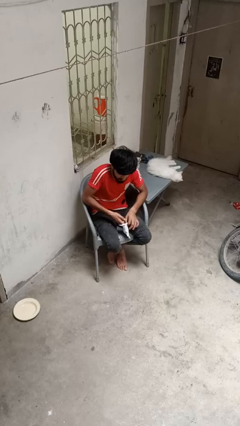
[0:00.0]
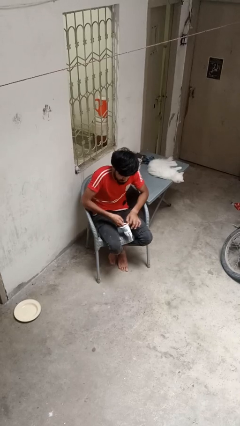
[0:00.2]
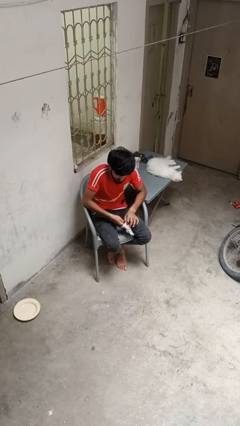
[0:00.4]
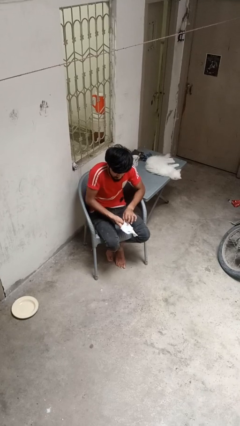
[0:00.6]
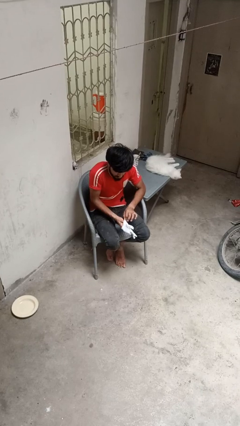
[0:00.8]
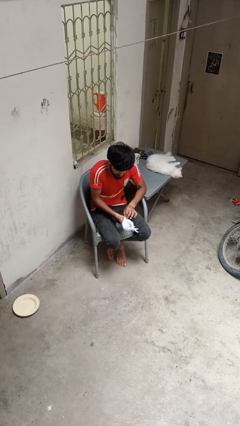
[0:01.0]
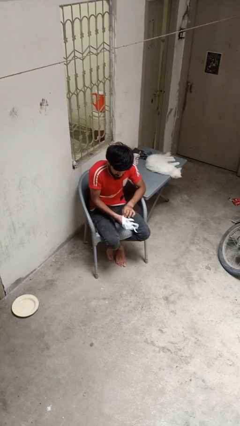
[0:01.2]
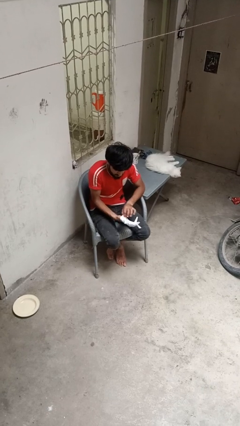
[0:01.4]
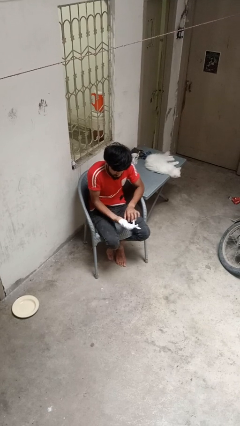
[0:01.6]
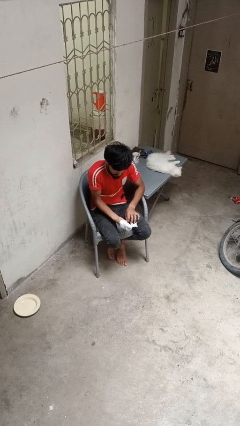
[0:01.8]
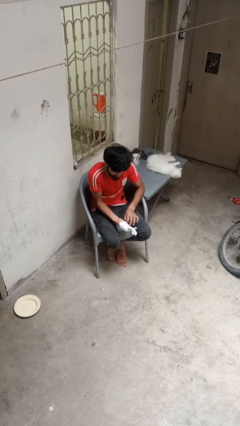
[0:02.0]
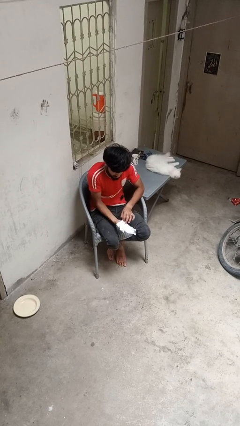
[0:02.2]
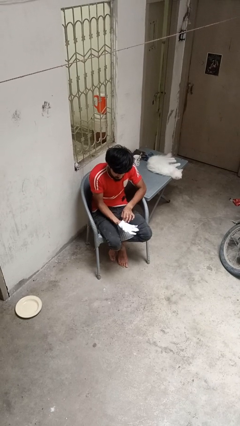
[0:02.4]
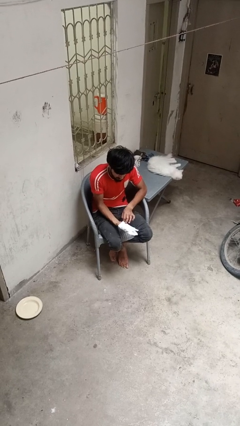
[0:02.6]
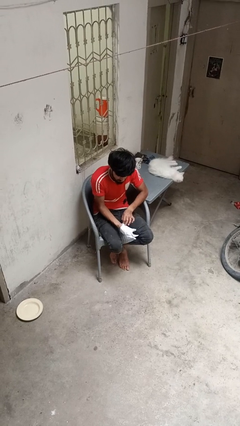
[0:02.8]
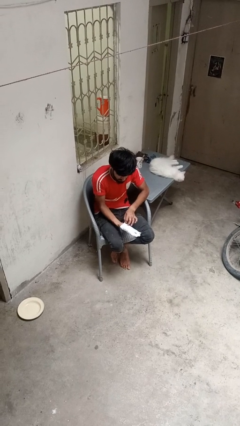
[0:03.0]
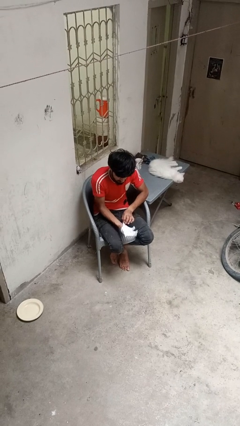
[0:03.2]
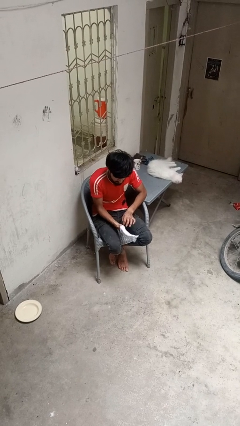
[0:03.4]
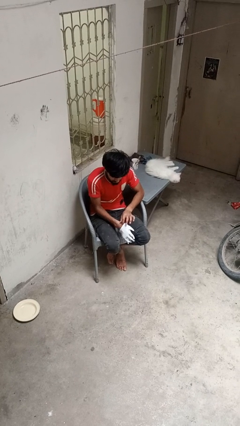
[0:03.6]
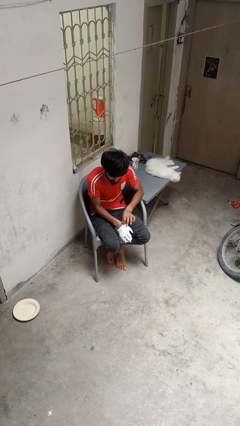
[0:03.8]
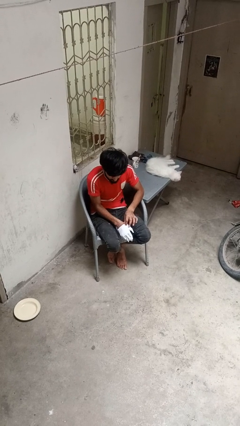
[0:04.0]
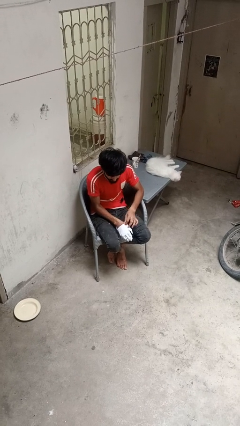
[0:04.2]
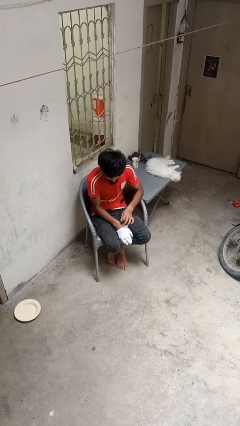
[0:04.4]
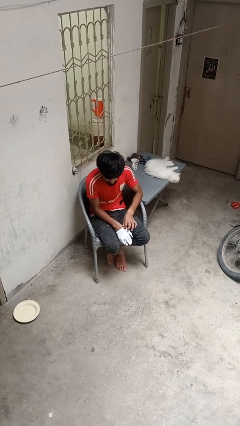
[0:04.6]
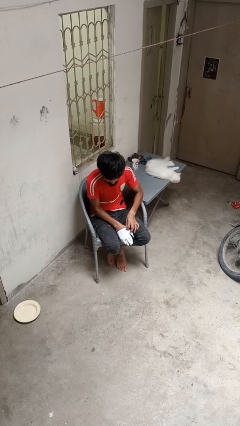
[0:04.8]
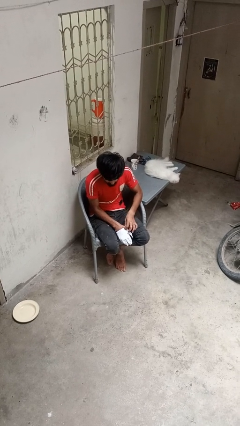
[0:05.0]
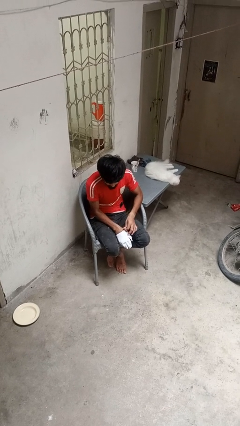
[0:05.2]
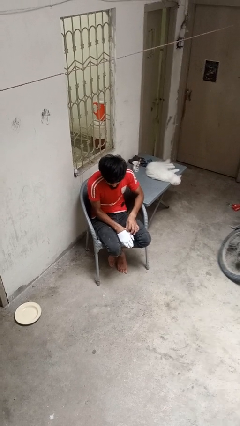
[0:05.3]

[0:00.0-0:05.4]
person puts on gloves

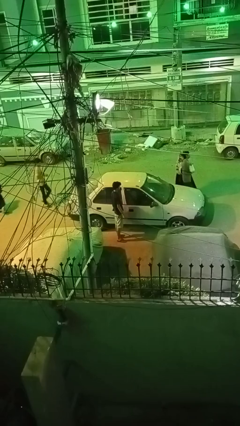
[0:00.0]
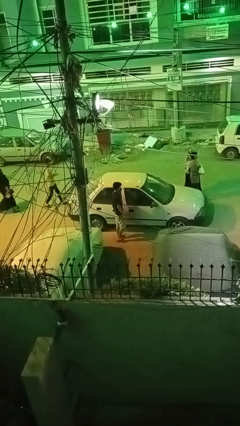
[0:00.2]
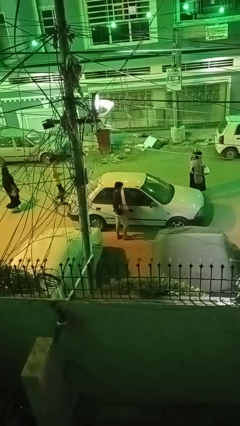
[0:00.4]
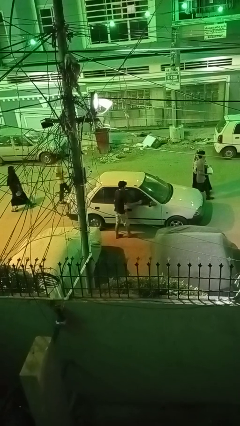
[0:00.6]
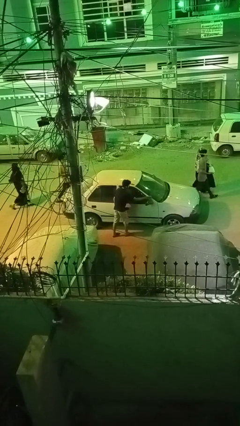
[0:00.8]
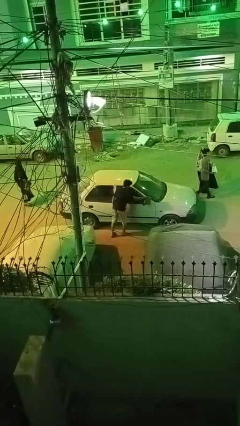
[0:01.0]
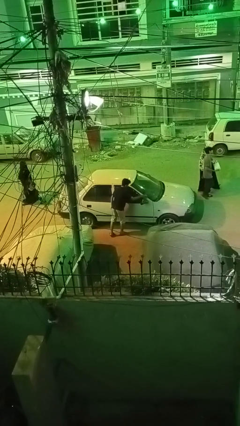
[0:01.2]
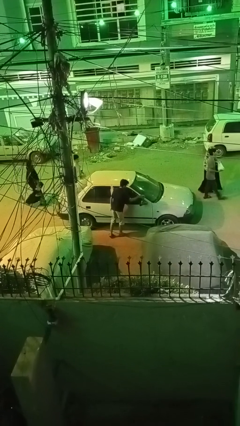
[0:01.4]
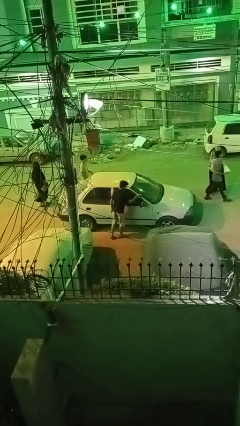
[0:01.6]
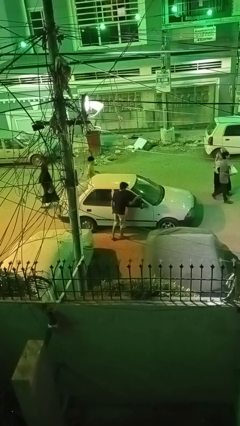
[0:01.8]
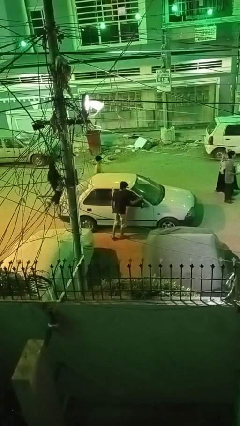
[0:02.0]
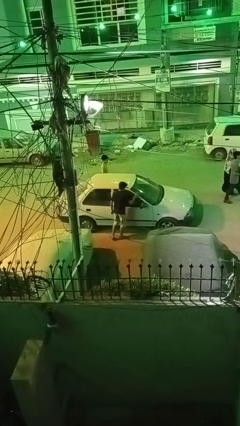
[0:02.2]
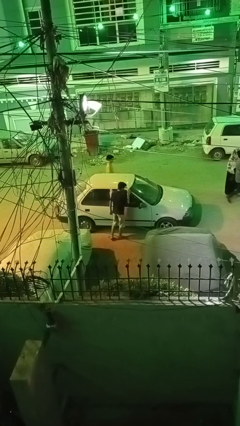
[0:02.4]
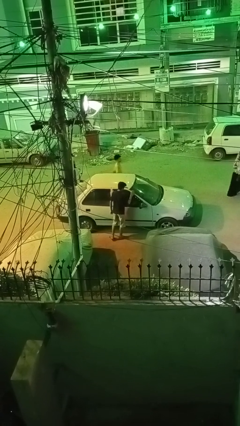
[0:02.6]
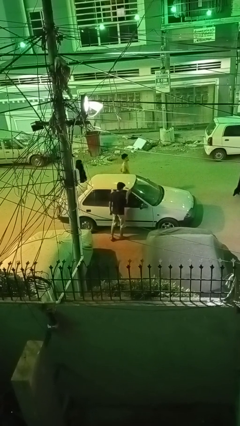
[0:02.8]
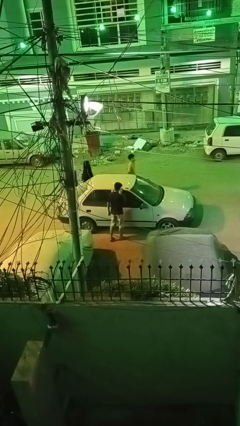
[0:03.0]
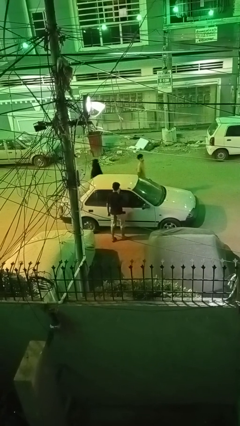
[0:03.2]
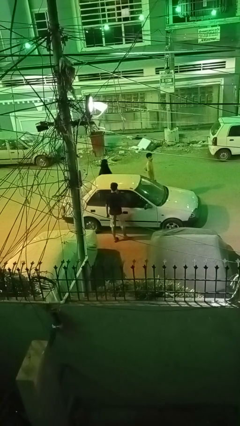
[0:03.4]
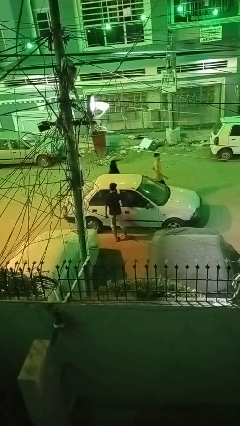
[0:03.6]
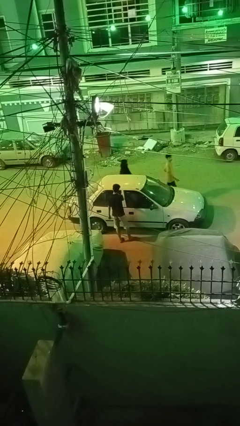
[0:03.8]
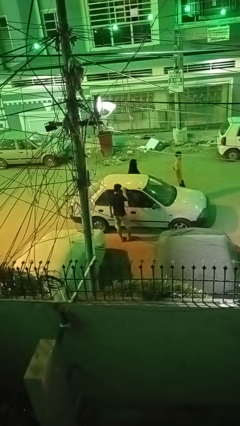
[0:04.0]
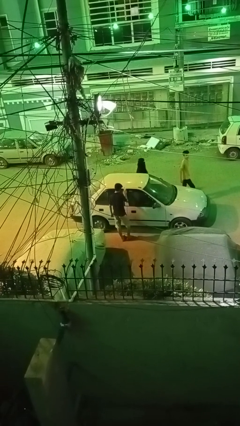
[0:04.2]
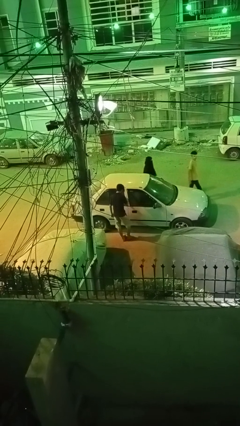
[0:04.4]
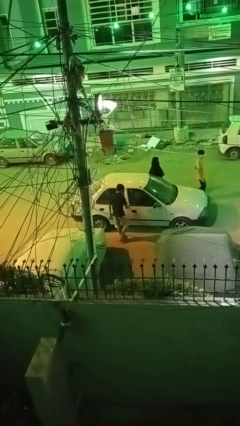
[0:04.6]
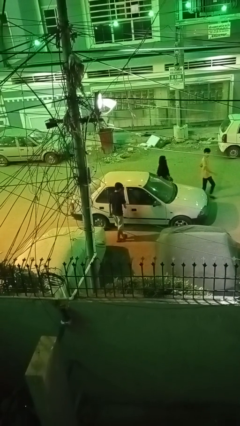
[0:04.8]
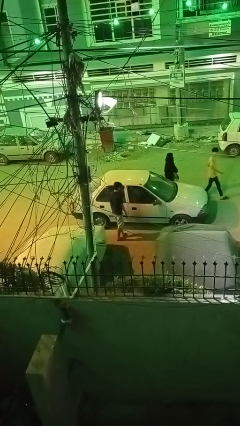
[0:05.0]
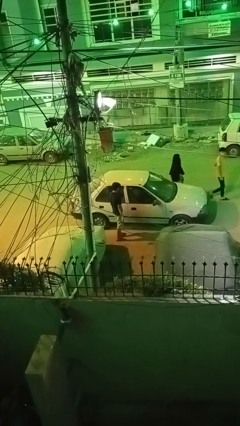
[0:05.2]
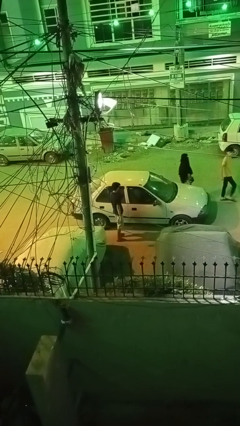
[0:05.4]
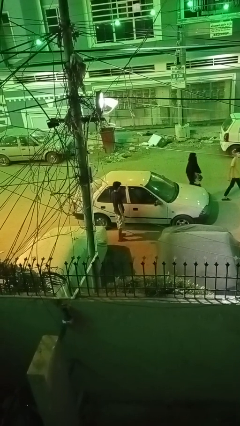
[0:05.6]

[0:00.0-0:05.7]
person polishes car with rag

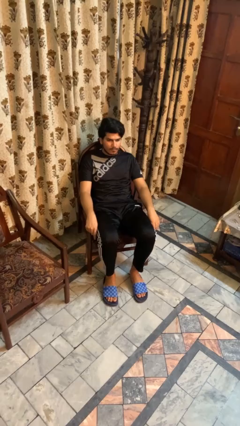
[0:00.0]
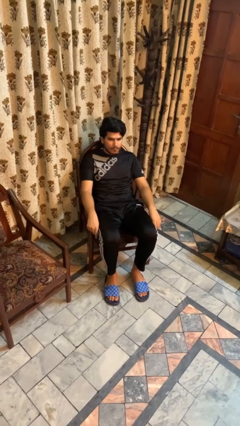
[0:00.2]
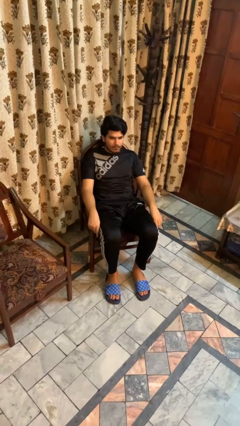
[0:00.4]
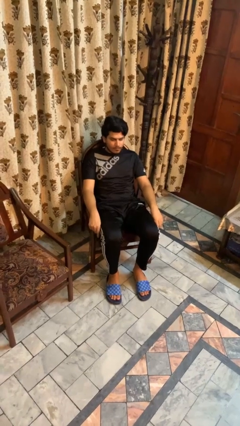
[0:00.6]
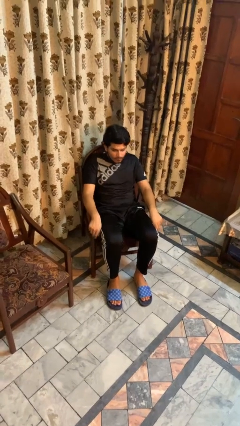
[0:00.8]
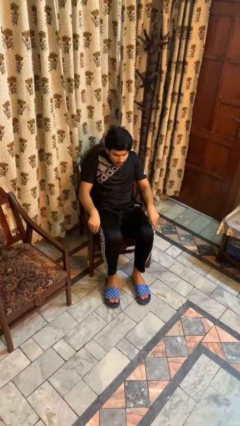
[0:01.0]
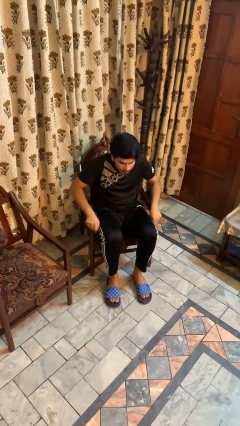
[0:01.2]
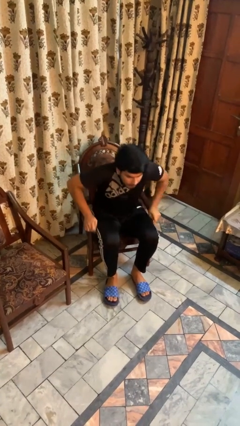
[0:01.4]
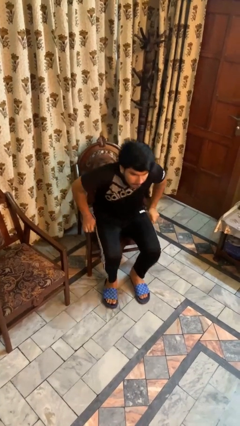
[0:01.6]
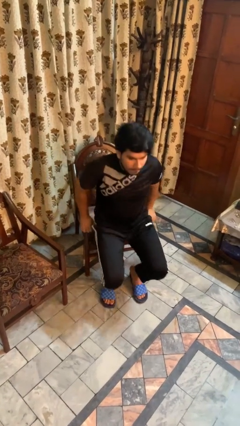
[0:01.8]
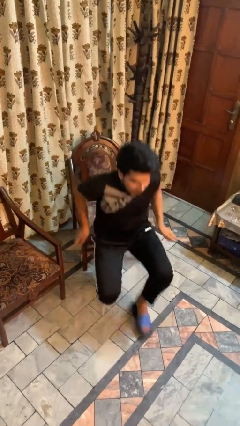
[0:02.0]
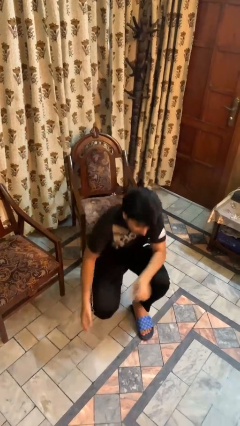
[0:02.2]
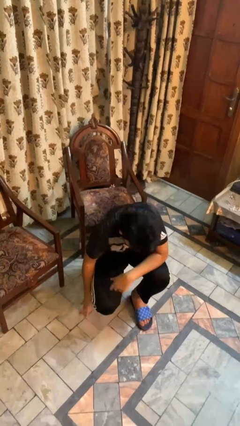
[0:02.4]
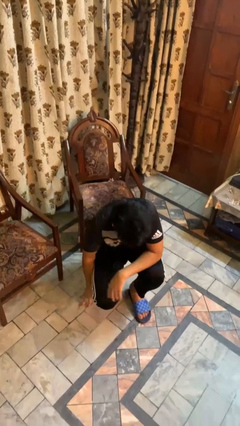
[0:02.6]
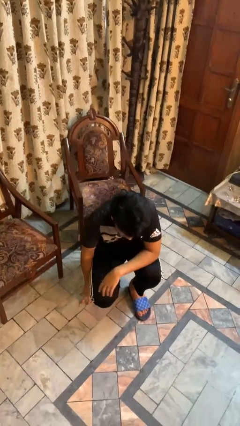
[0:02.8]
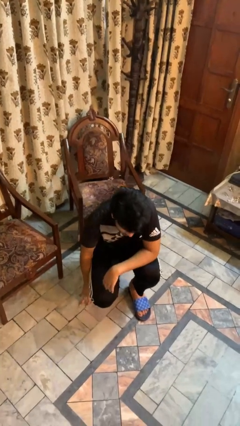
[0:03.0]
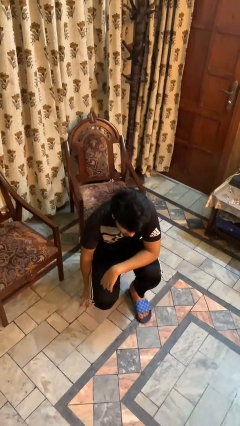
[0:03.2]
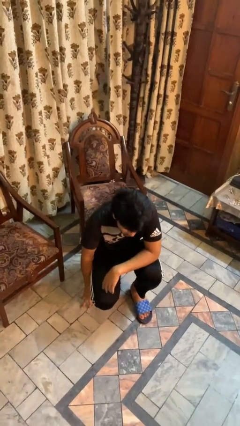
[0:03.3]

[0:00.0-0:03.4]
person falls from chair

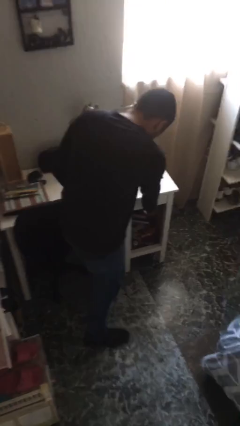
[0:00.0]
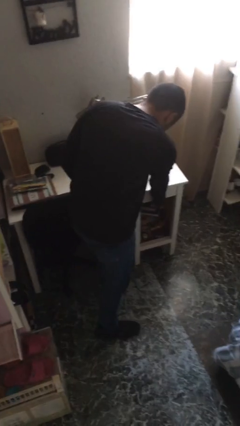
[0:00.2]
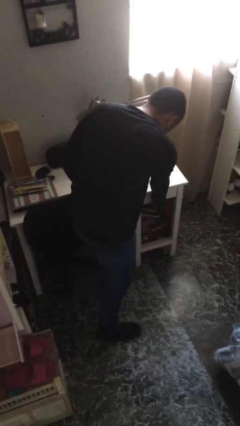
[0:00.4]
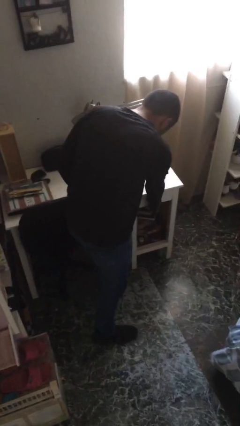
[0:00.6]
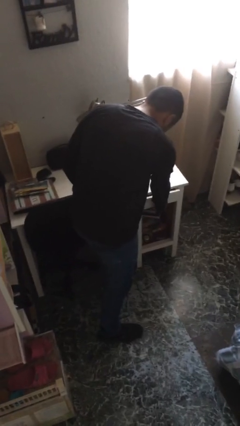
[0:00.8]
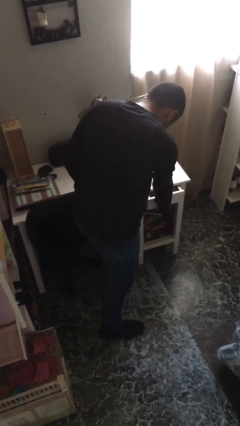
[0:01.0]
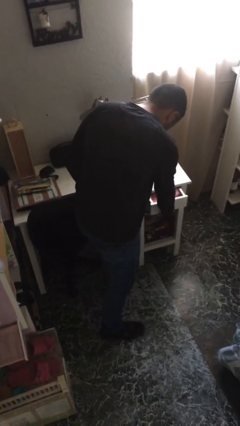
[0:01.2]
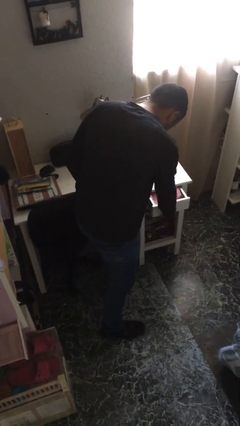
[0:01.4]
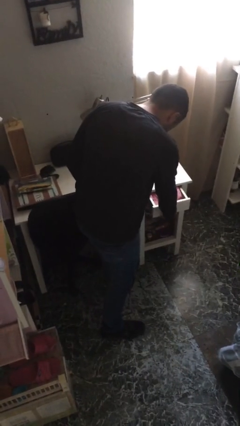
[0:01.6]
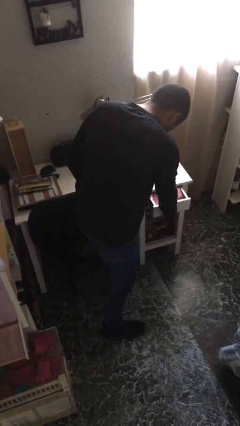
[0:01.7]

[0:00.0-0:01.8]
person opens dresser drawer

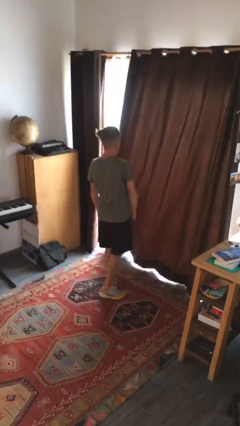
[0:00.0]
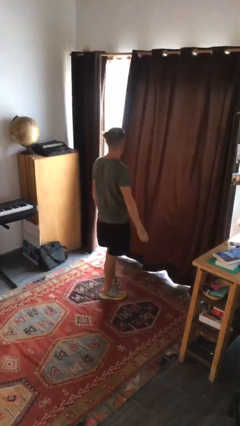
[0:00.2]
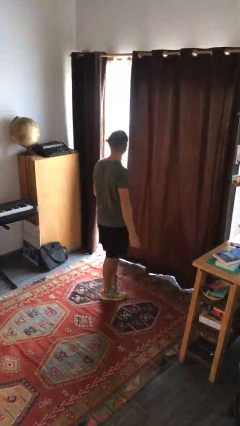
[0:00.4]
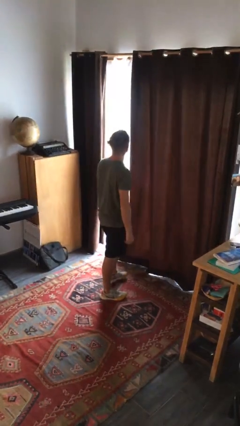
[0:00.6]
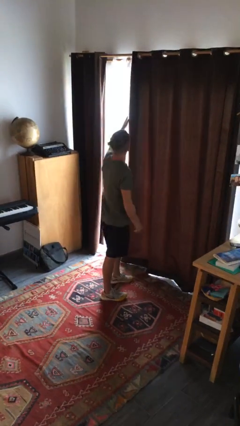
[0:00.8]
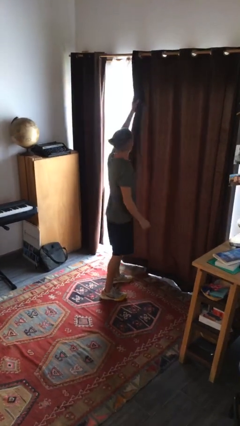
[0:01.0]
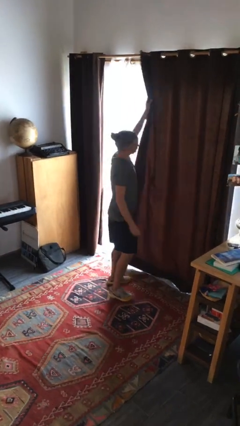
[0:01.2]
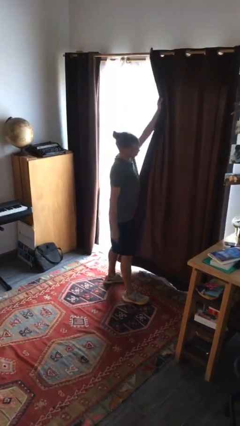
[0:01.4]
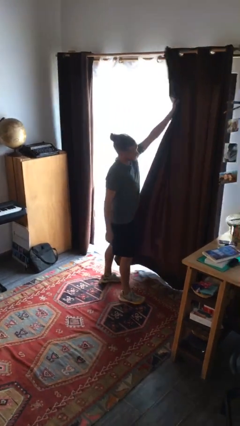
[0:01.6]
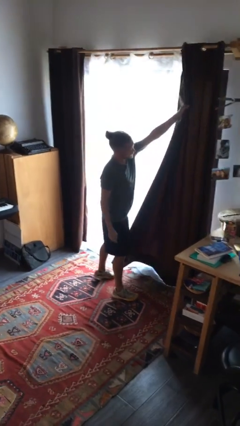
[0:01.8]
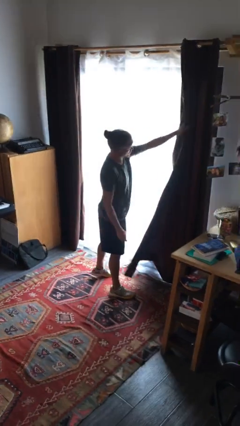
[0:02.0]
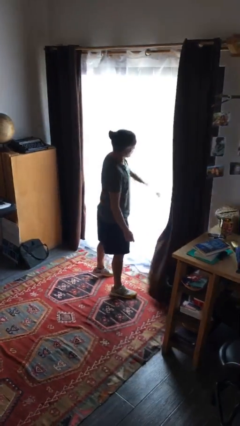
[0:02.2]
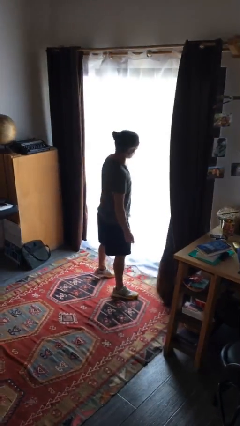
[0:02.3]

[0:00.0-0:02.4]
person opens curtains
